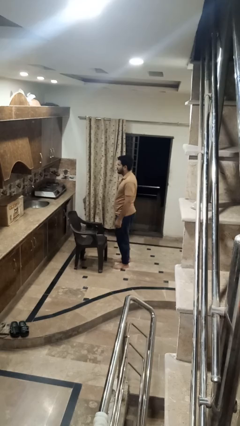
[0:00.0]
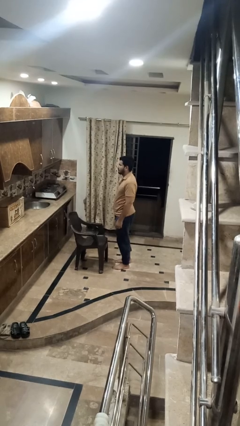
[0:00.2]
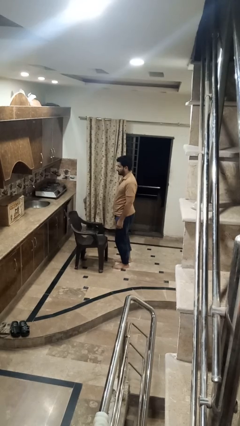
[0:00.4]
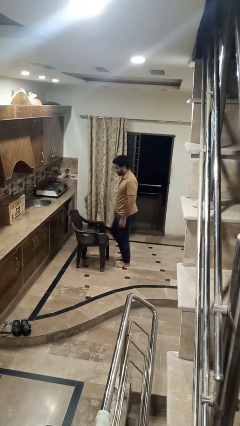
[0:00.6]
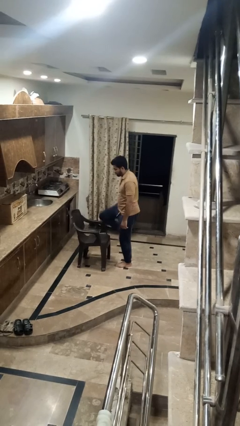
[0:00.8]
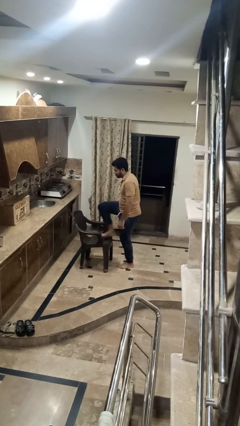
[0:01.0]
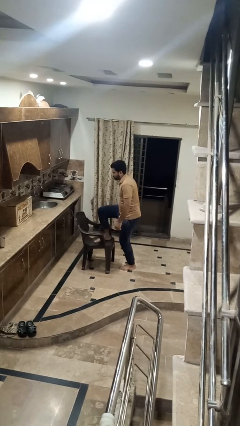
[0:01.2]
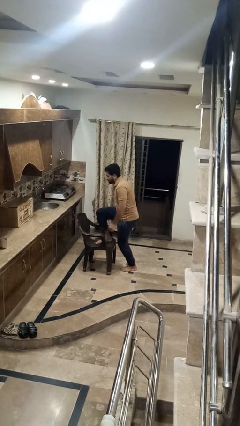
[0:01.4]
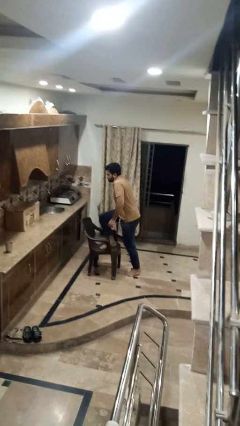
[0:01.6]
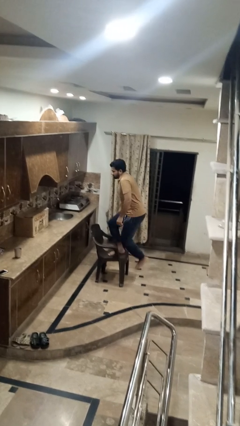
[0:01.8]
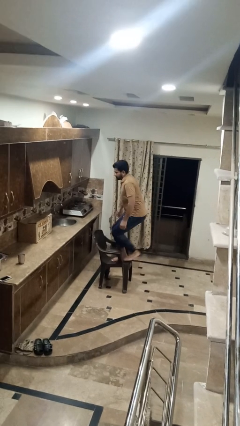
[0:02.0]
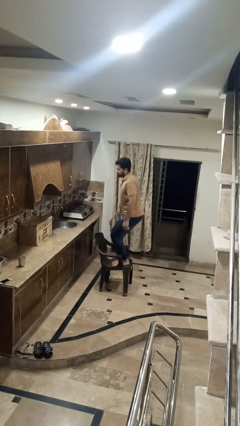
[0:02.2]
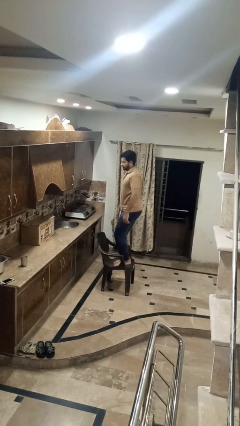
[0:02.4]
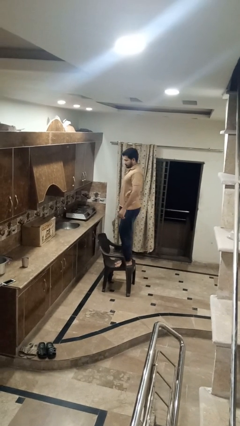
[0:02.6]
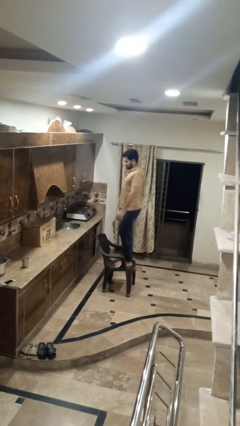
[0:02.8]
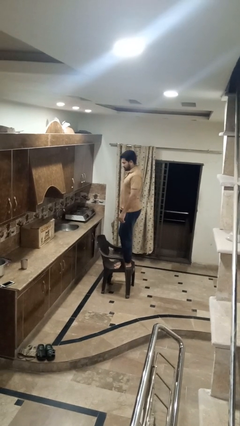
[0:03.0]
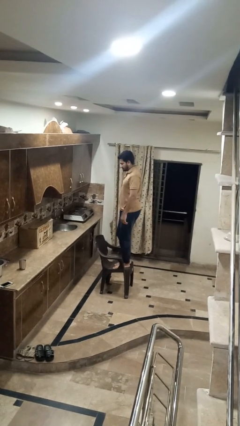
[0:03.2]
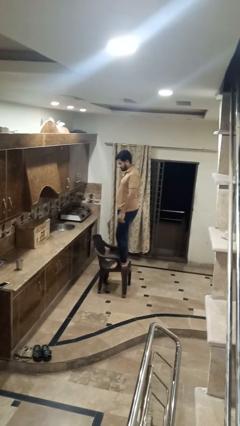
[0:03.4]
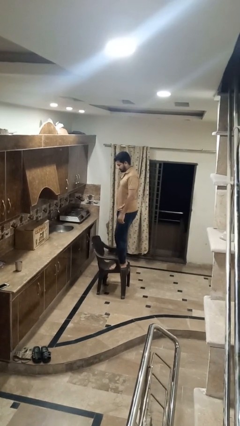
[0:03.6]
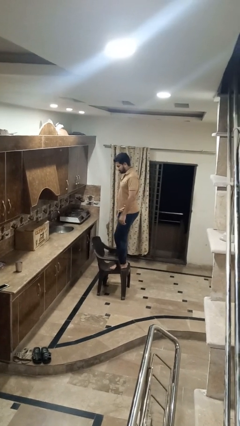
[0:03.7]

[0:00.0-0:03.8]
person climbs on chair

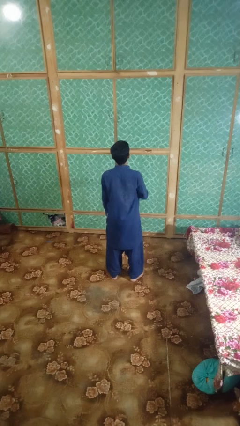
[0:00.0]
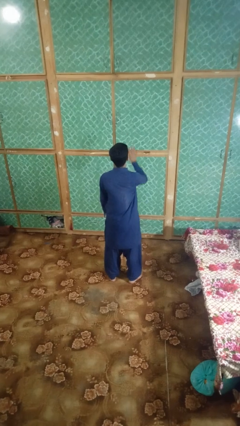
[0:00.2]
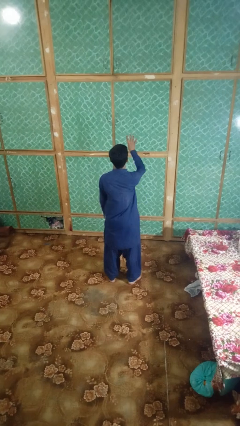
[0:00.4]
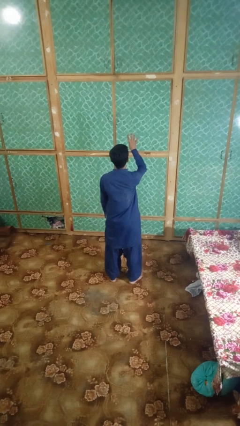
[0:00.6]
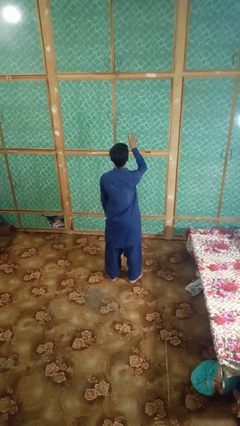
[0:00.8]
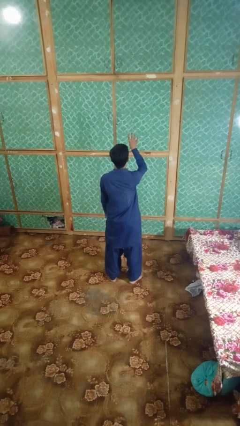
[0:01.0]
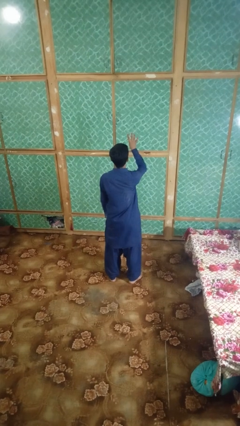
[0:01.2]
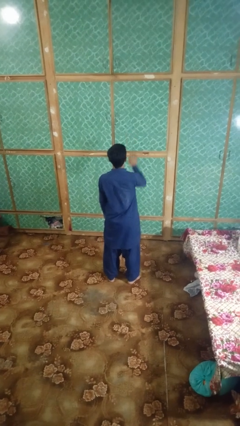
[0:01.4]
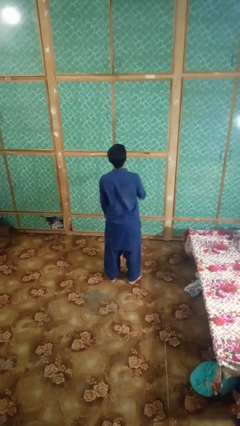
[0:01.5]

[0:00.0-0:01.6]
person gestures number four

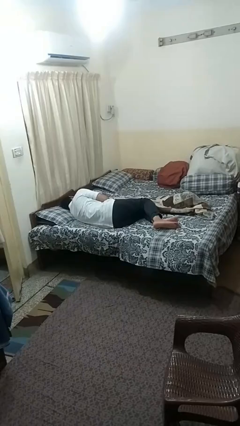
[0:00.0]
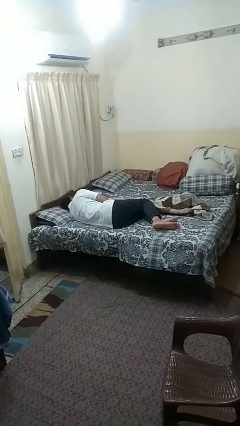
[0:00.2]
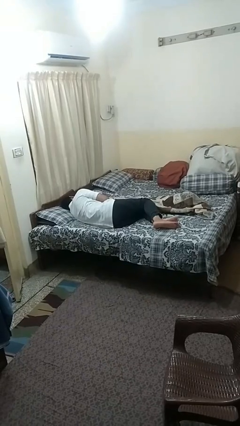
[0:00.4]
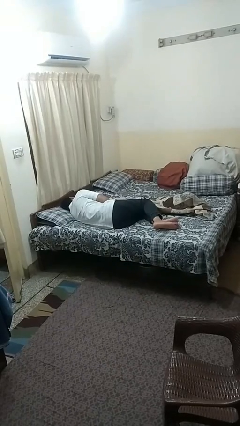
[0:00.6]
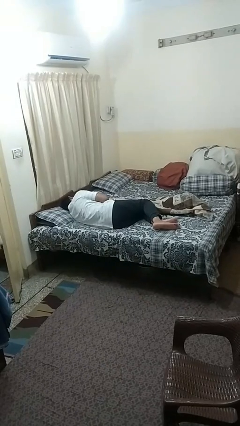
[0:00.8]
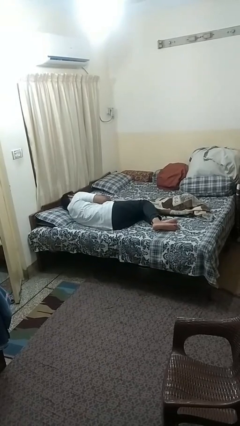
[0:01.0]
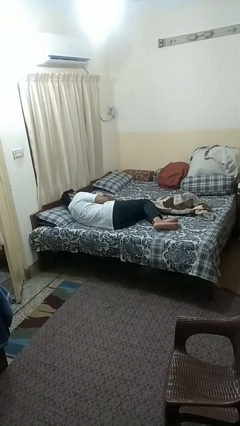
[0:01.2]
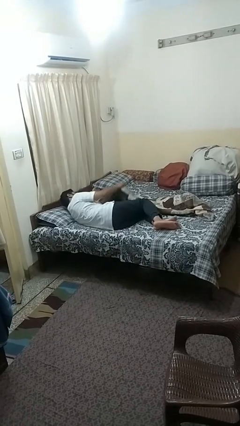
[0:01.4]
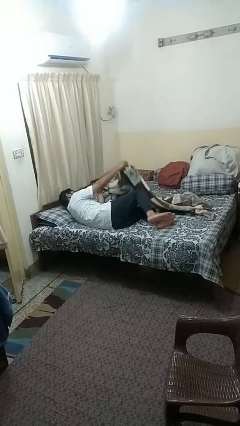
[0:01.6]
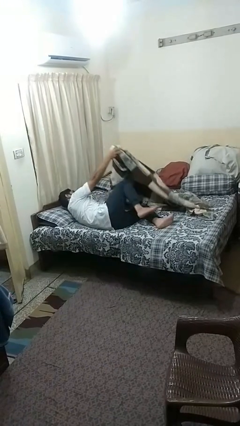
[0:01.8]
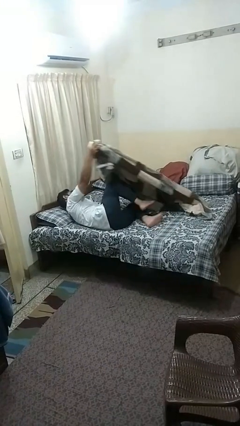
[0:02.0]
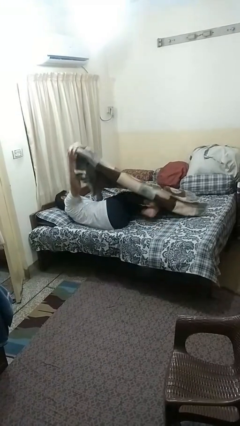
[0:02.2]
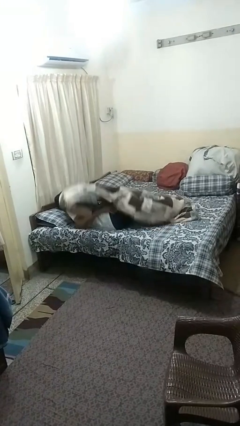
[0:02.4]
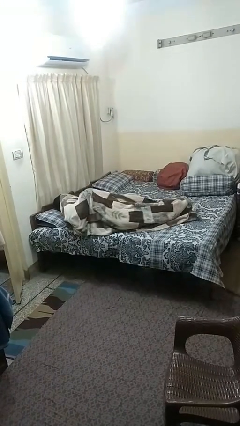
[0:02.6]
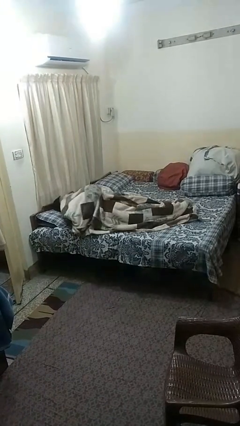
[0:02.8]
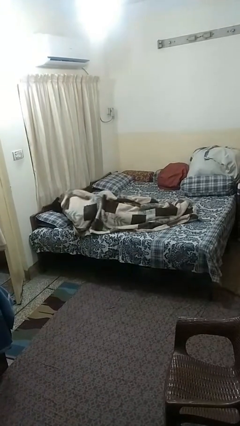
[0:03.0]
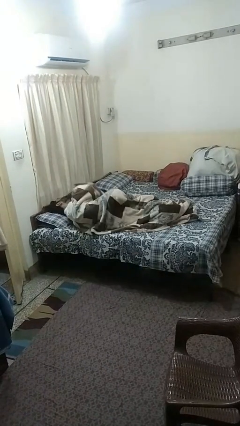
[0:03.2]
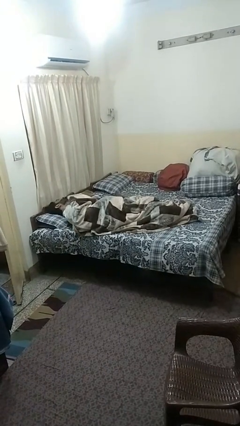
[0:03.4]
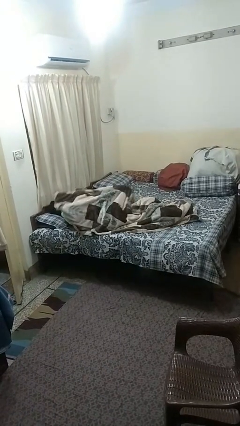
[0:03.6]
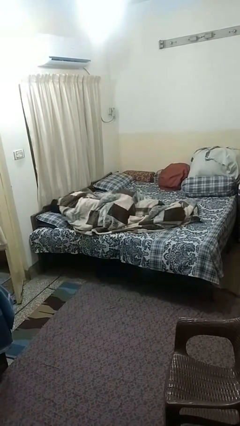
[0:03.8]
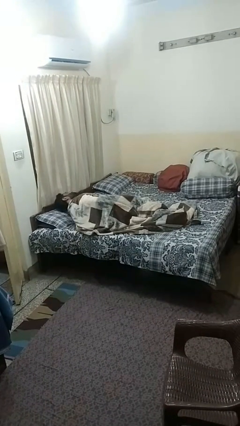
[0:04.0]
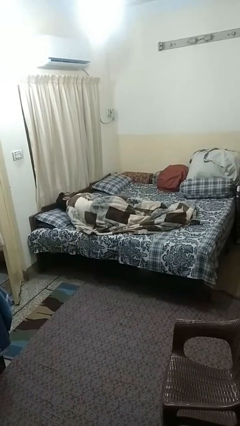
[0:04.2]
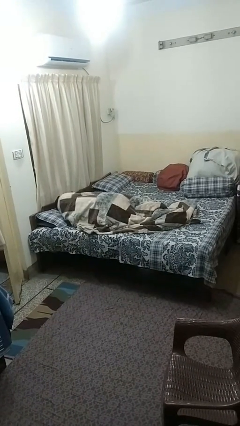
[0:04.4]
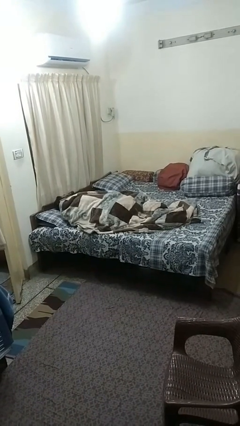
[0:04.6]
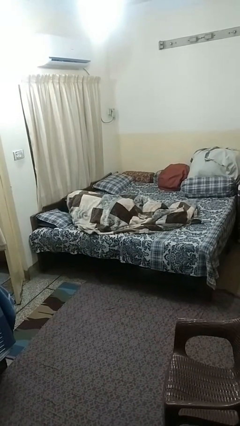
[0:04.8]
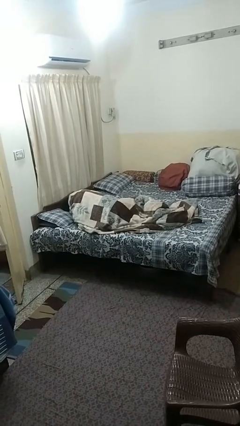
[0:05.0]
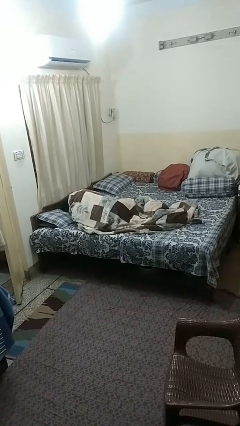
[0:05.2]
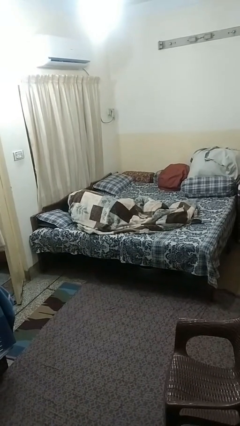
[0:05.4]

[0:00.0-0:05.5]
person covers with blanket

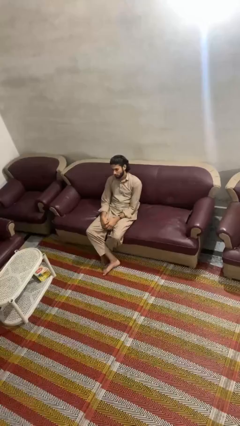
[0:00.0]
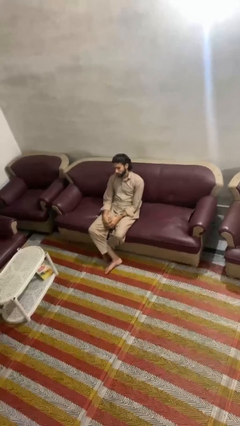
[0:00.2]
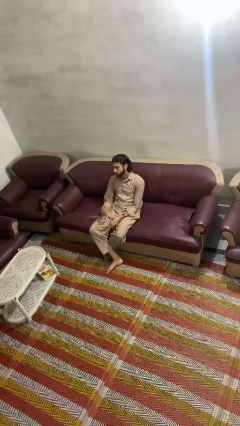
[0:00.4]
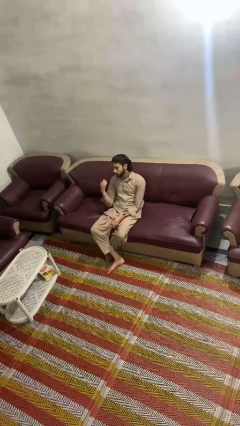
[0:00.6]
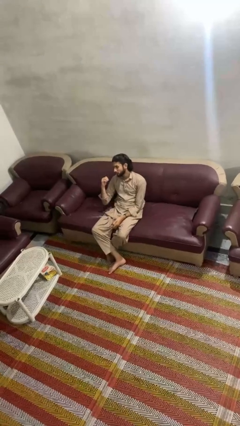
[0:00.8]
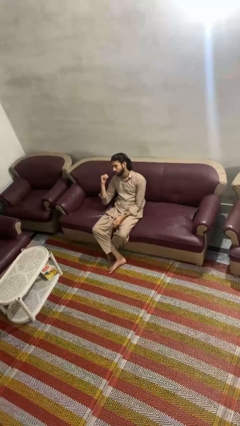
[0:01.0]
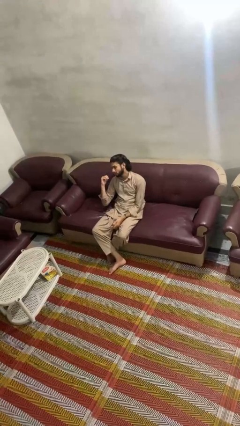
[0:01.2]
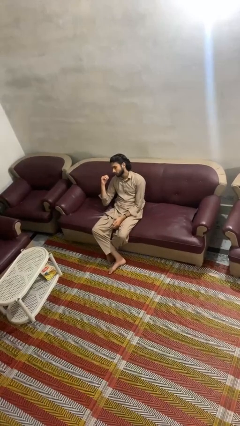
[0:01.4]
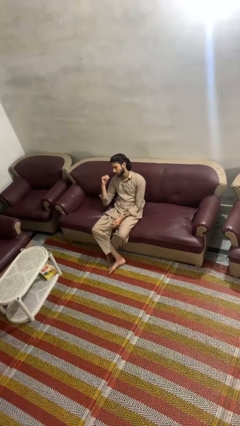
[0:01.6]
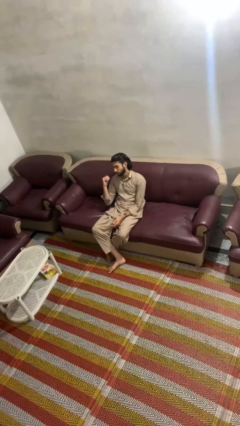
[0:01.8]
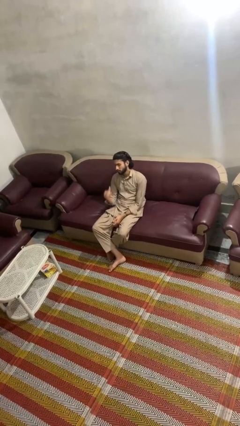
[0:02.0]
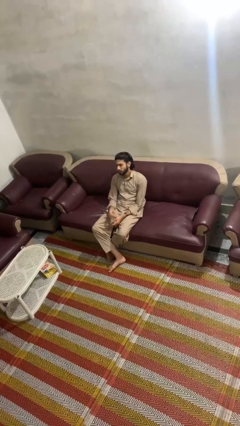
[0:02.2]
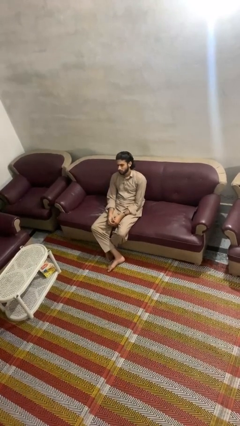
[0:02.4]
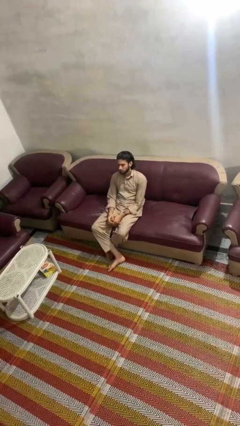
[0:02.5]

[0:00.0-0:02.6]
person gestures behind me

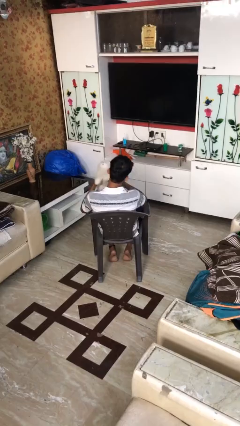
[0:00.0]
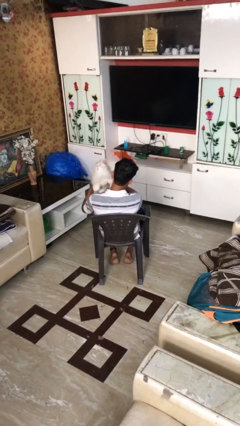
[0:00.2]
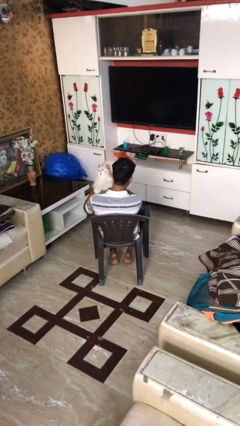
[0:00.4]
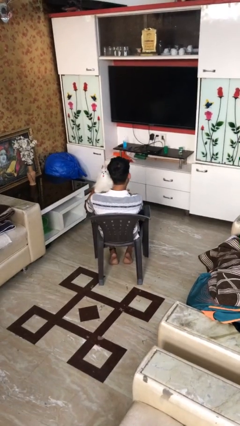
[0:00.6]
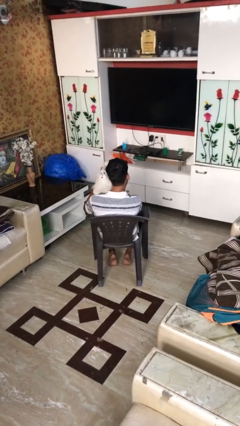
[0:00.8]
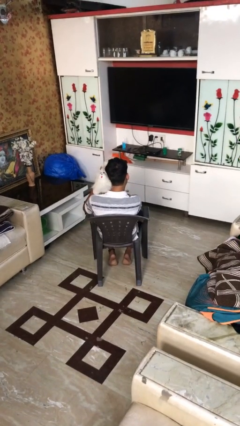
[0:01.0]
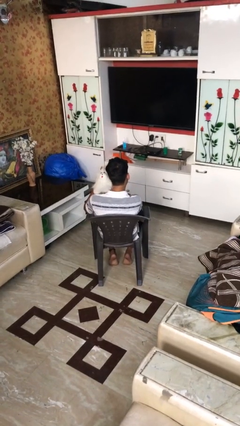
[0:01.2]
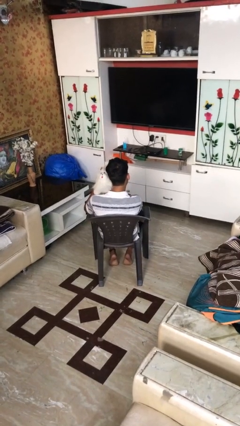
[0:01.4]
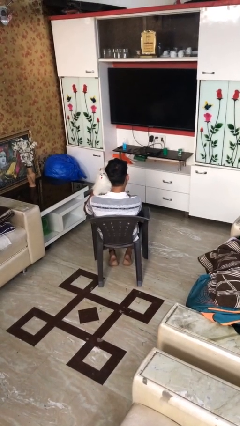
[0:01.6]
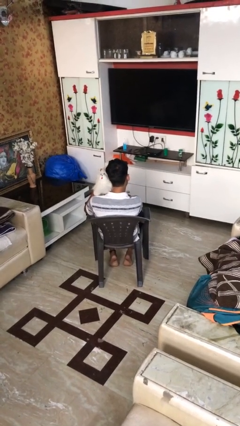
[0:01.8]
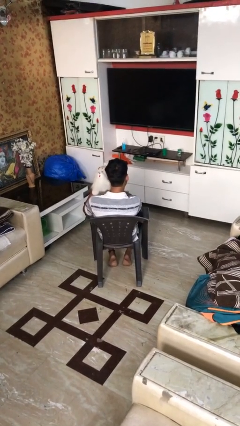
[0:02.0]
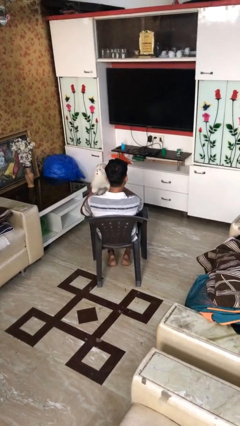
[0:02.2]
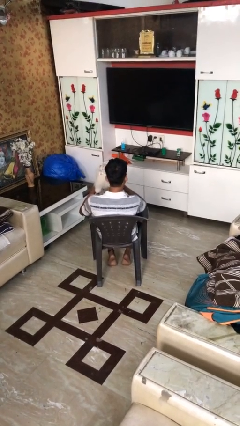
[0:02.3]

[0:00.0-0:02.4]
person hugs stuffed animal

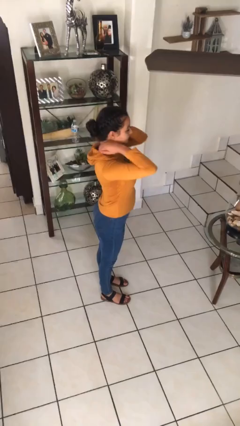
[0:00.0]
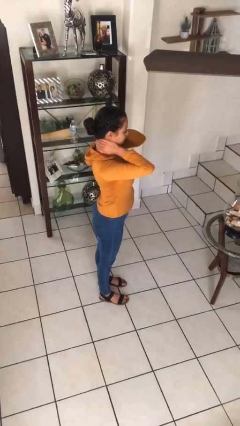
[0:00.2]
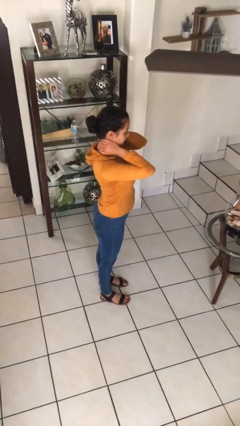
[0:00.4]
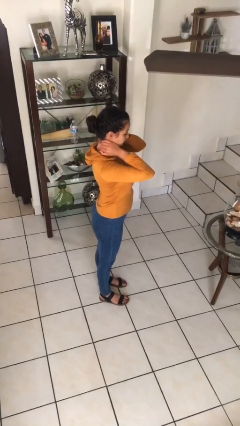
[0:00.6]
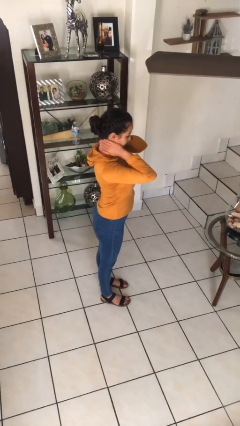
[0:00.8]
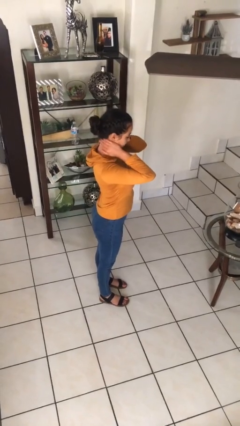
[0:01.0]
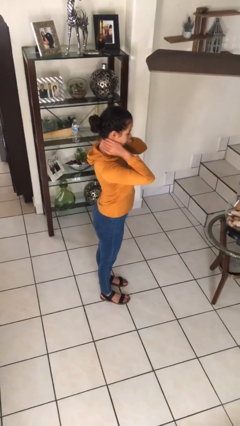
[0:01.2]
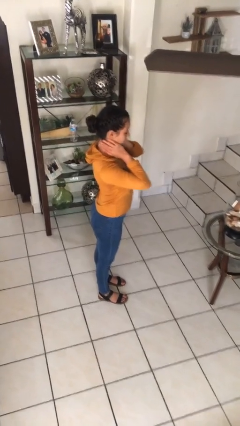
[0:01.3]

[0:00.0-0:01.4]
person rubs neck

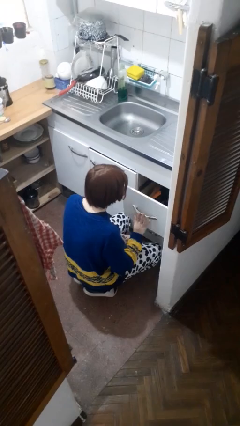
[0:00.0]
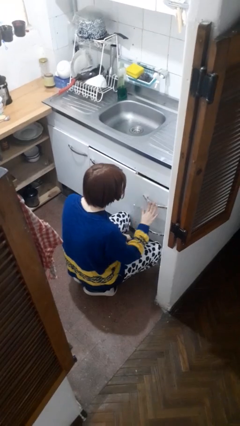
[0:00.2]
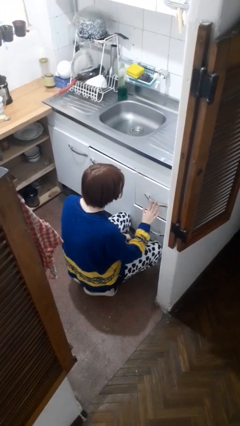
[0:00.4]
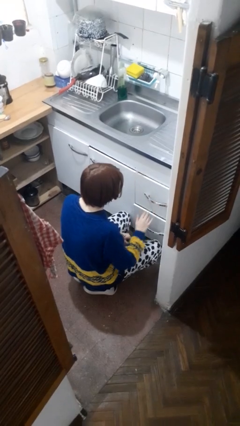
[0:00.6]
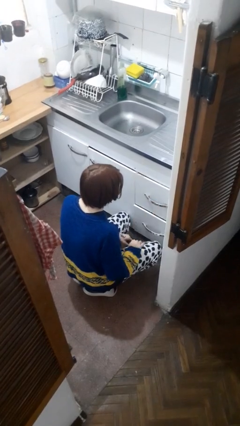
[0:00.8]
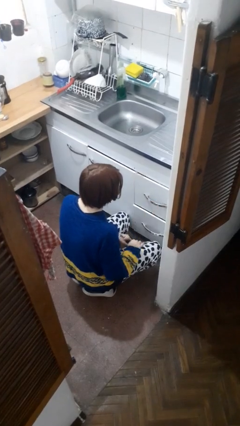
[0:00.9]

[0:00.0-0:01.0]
person closes kitchen drawer
